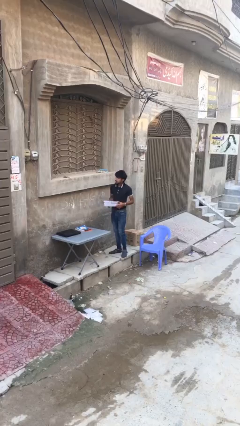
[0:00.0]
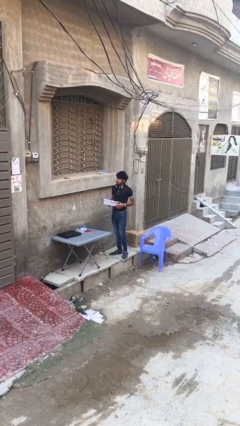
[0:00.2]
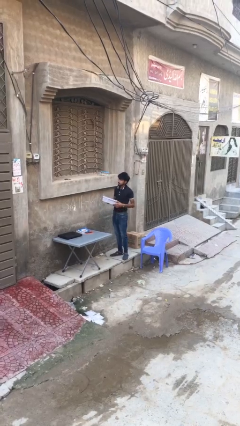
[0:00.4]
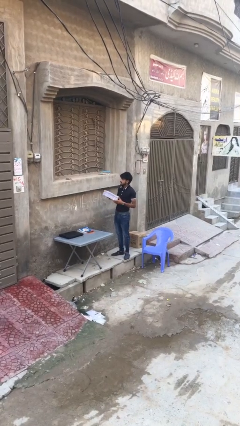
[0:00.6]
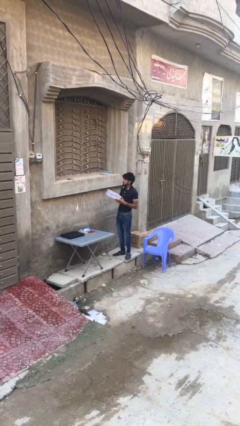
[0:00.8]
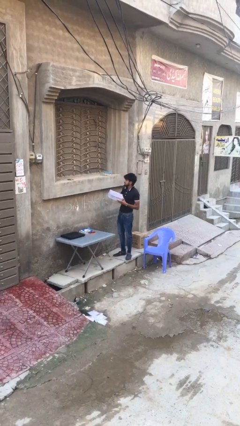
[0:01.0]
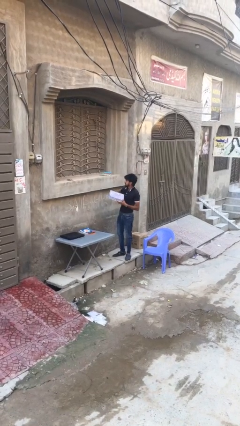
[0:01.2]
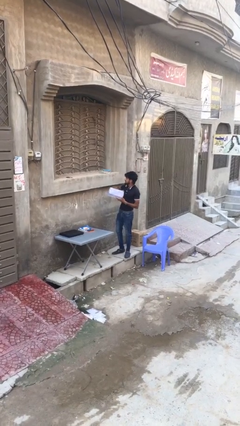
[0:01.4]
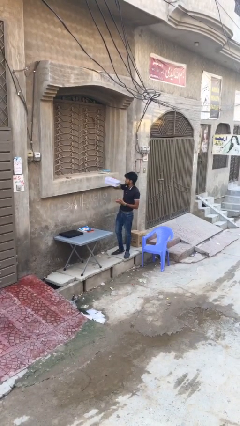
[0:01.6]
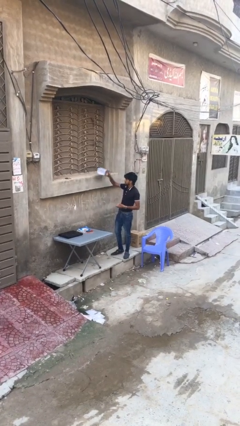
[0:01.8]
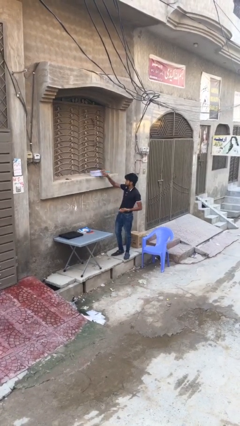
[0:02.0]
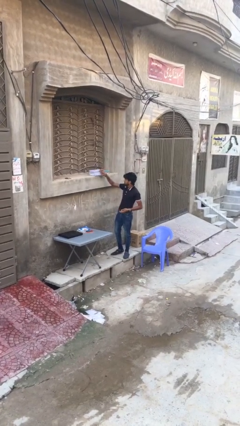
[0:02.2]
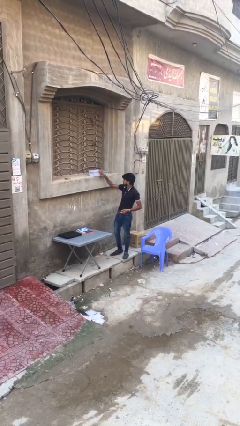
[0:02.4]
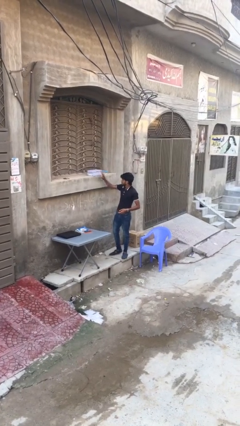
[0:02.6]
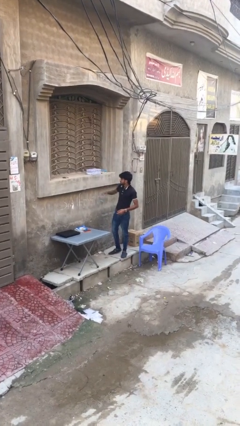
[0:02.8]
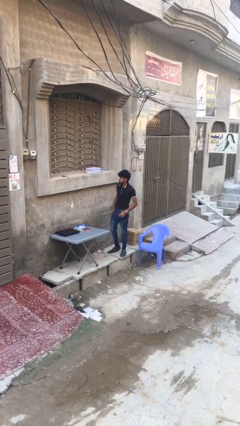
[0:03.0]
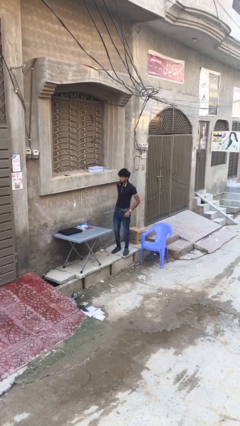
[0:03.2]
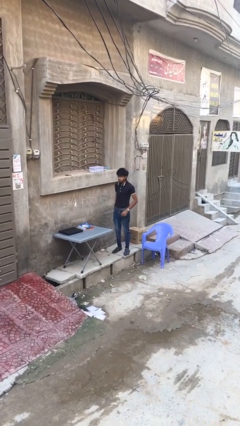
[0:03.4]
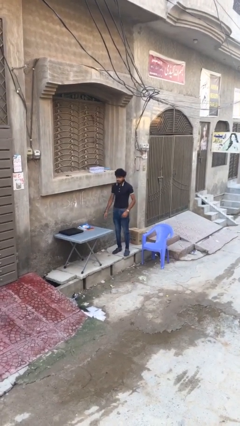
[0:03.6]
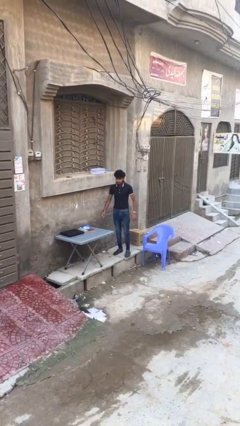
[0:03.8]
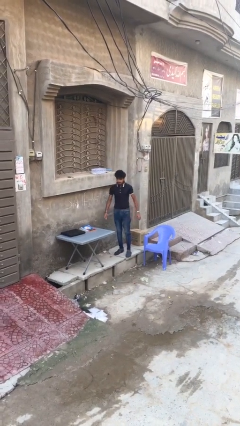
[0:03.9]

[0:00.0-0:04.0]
person puts down object on shelf

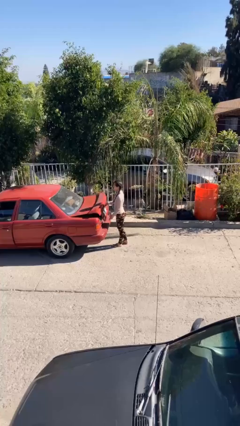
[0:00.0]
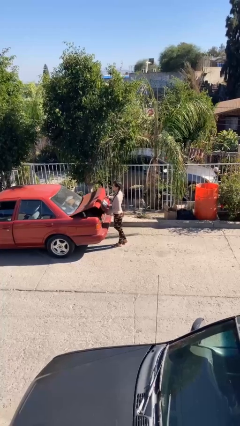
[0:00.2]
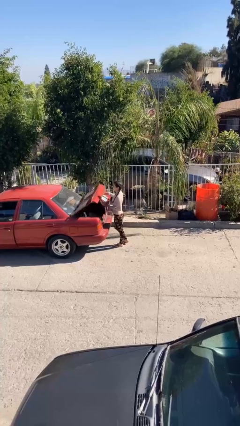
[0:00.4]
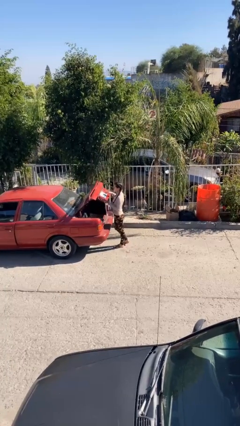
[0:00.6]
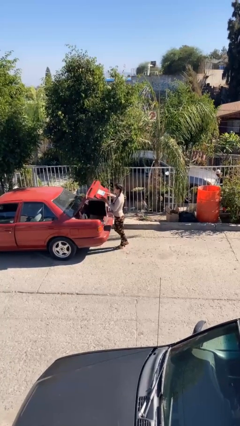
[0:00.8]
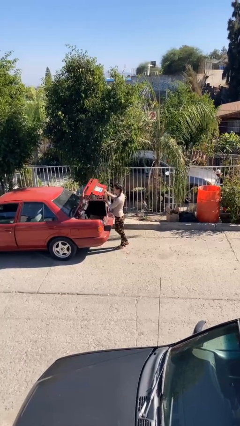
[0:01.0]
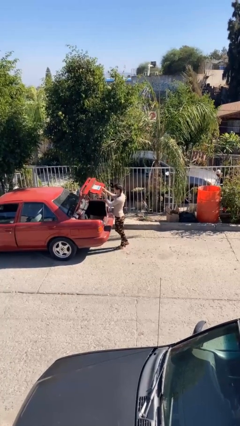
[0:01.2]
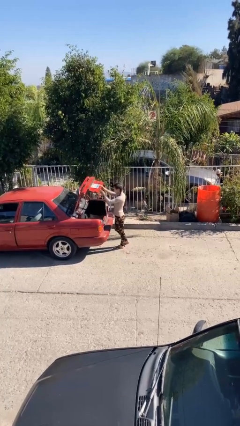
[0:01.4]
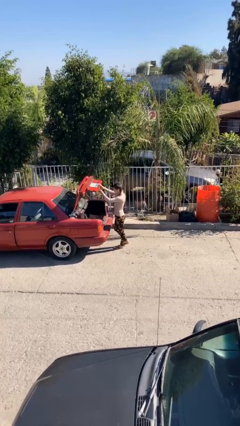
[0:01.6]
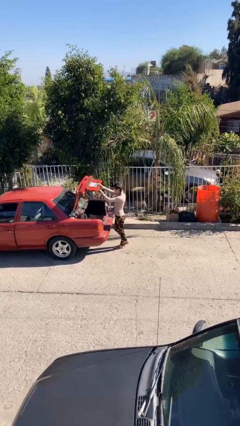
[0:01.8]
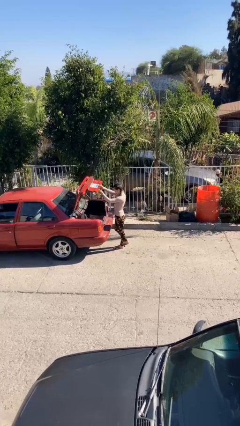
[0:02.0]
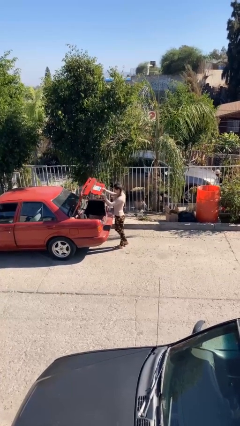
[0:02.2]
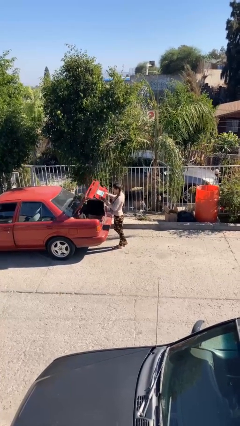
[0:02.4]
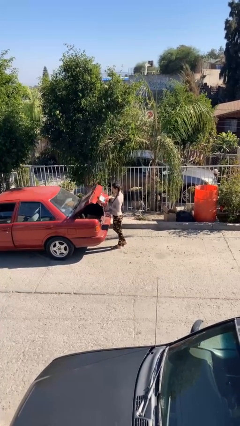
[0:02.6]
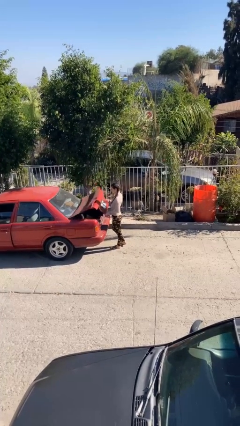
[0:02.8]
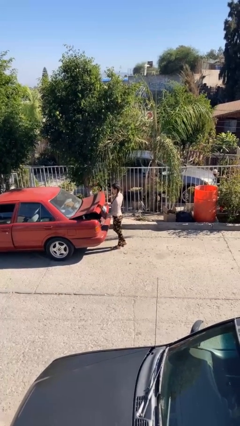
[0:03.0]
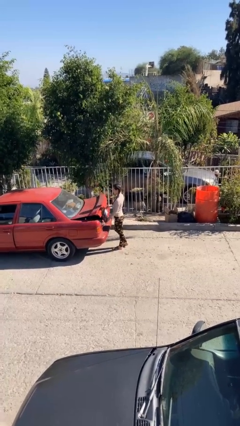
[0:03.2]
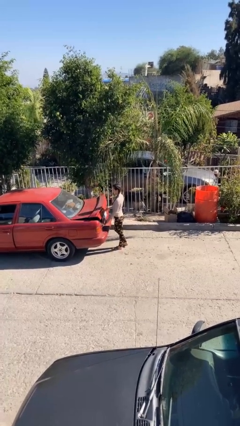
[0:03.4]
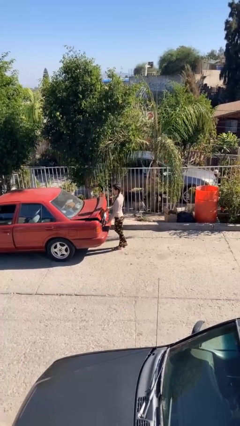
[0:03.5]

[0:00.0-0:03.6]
person opens car trunk

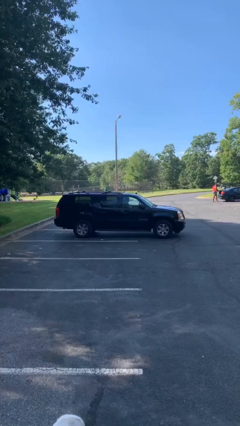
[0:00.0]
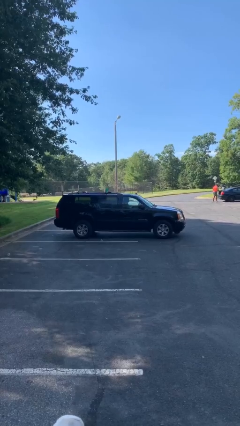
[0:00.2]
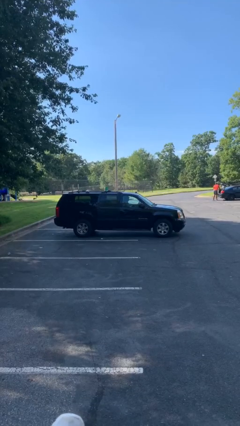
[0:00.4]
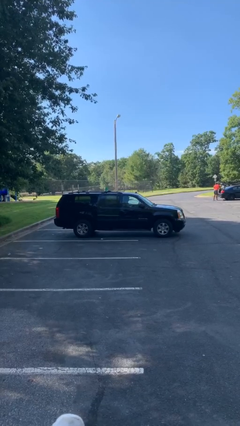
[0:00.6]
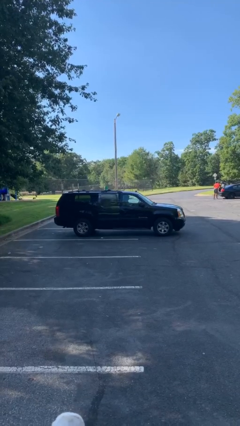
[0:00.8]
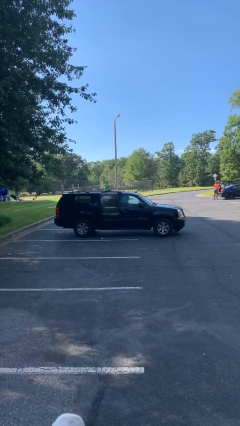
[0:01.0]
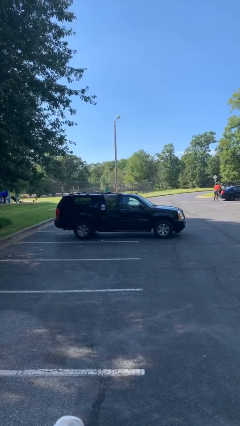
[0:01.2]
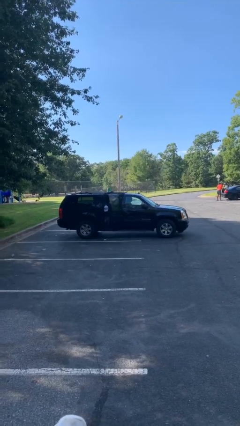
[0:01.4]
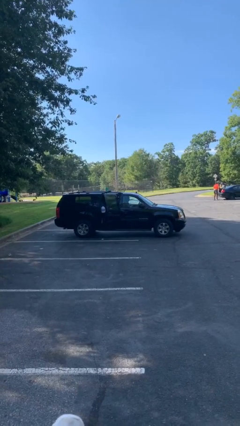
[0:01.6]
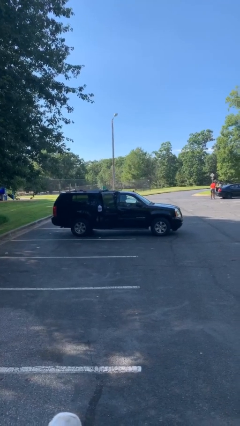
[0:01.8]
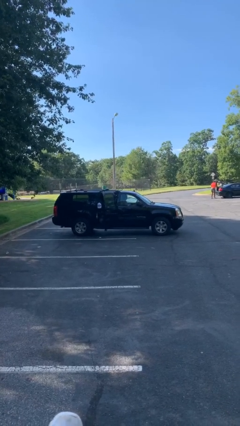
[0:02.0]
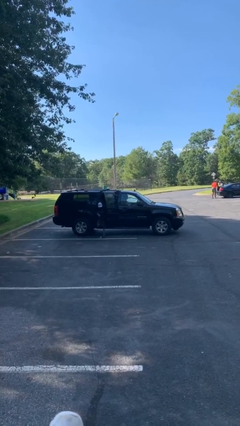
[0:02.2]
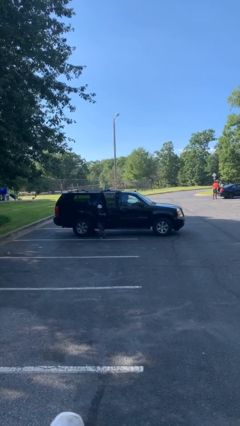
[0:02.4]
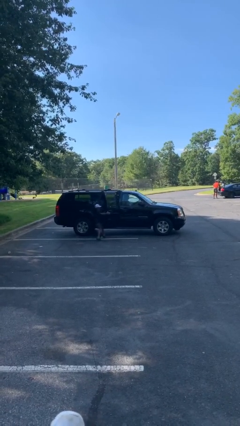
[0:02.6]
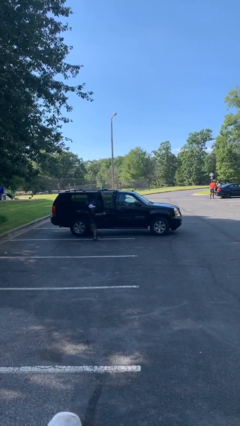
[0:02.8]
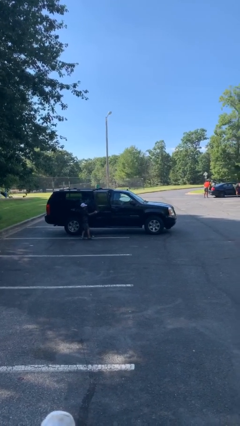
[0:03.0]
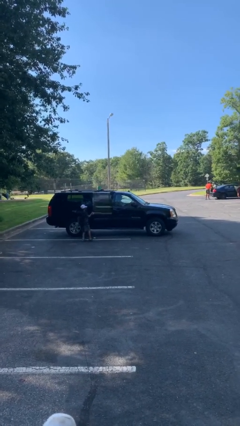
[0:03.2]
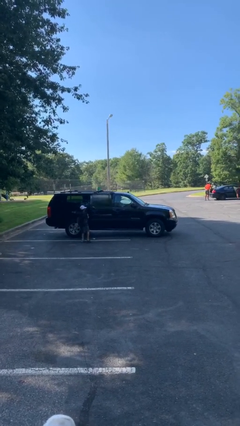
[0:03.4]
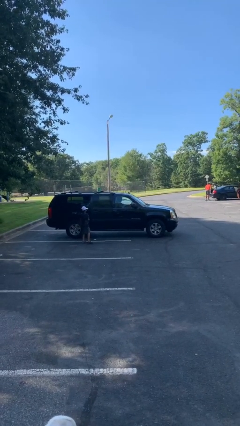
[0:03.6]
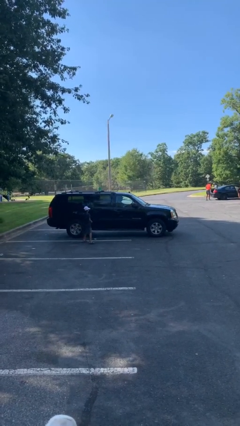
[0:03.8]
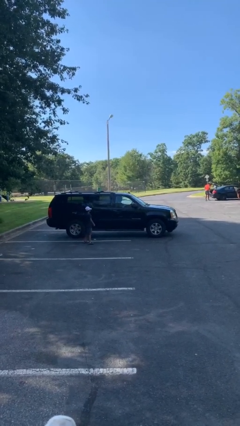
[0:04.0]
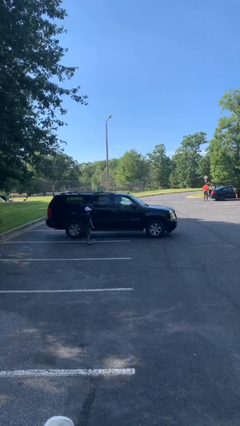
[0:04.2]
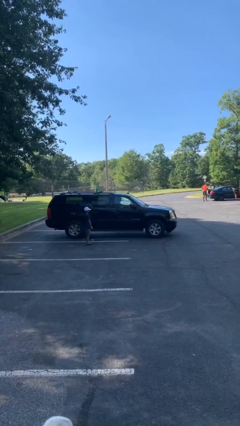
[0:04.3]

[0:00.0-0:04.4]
car drops off person

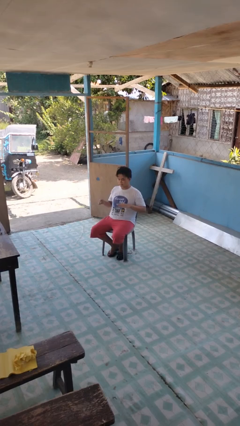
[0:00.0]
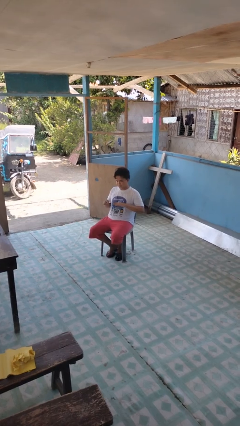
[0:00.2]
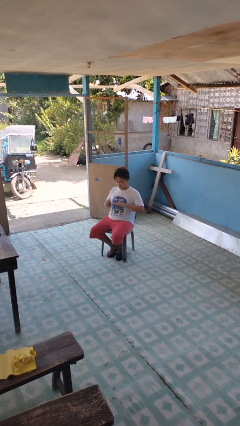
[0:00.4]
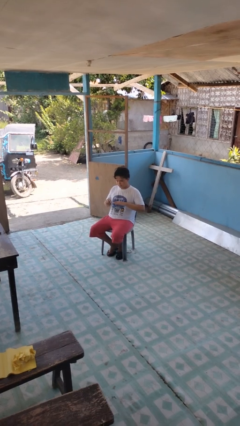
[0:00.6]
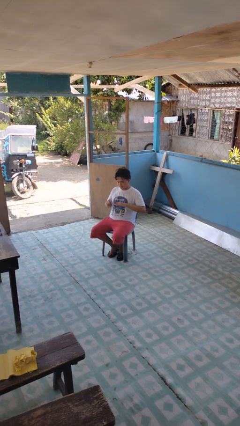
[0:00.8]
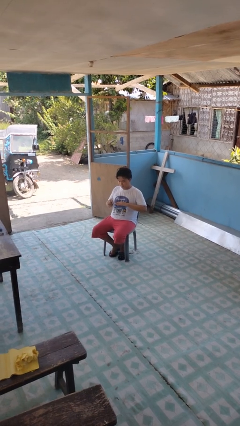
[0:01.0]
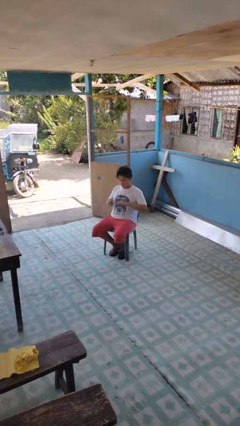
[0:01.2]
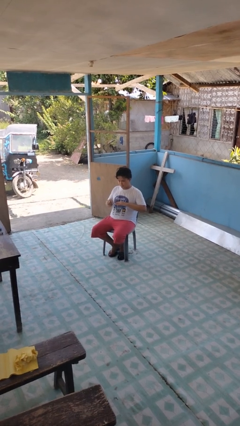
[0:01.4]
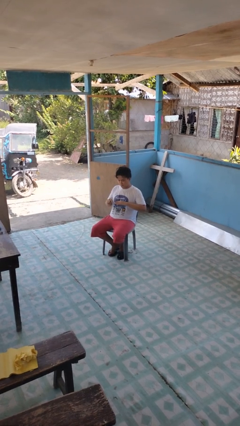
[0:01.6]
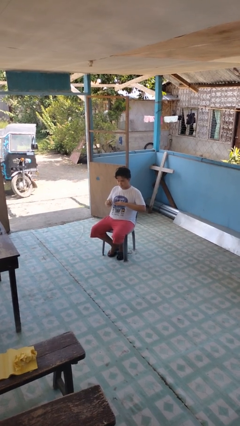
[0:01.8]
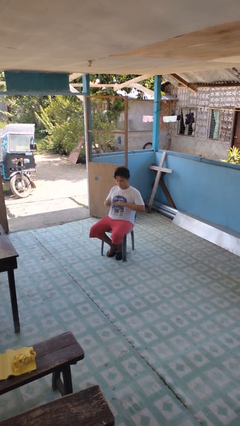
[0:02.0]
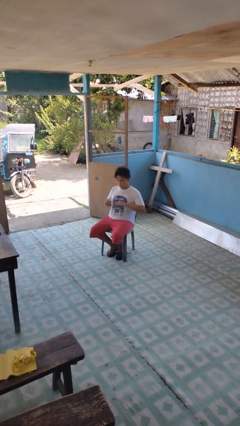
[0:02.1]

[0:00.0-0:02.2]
person files fingernails

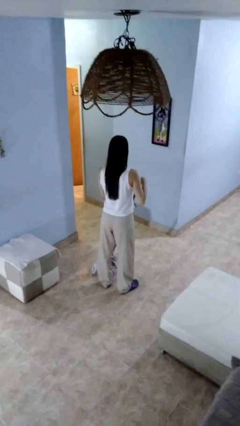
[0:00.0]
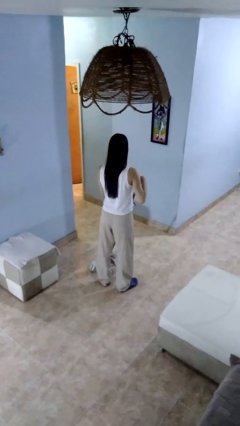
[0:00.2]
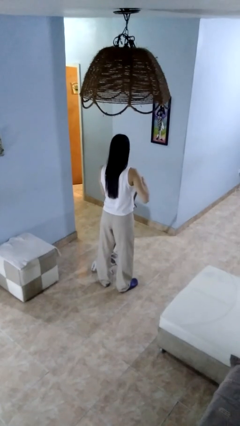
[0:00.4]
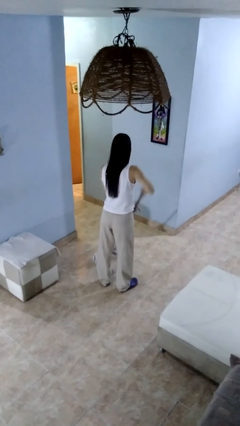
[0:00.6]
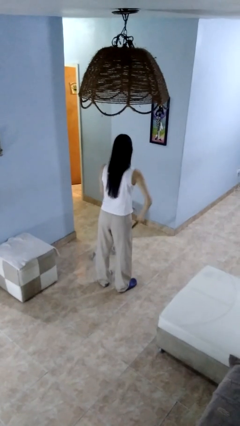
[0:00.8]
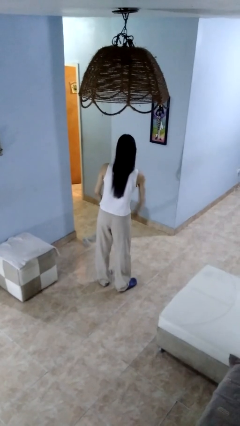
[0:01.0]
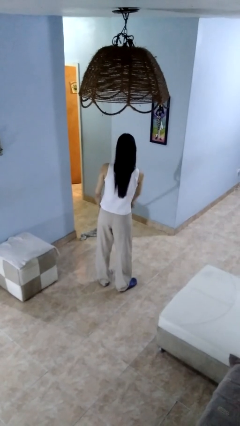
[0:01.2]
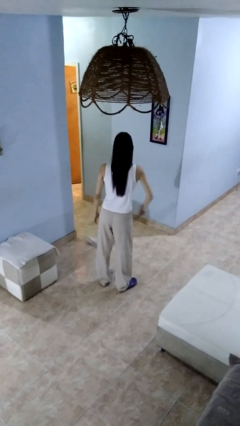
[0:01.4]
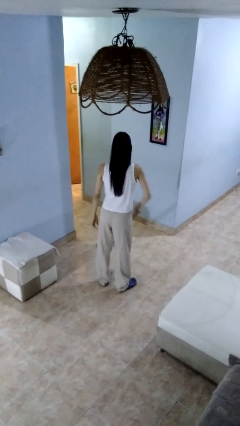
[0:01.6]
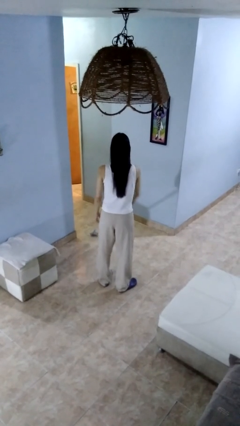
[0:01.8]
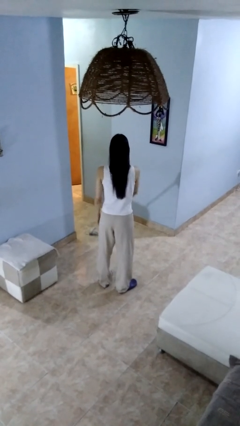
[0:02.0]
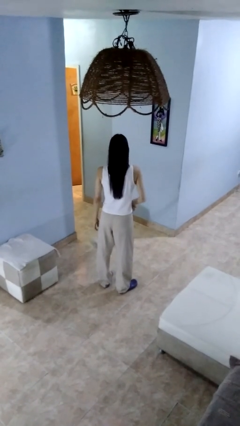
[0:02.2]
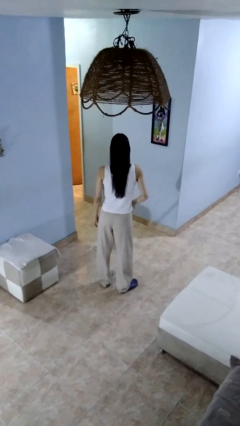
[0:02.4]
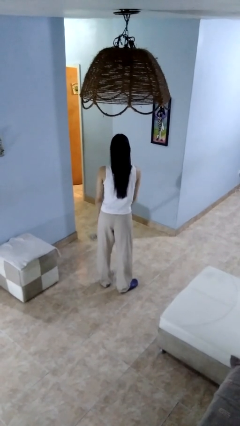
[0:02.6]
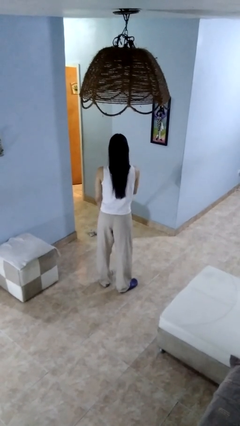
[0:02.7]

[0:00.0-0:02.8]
person mops

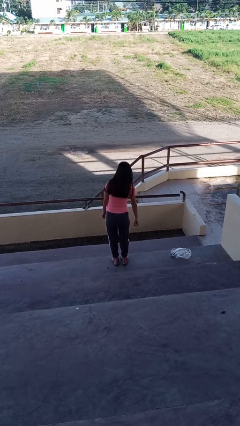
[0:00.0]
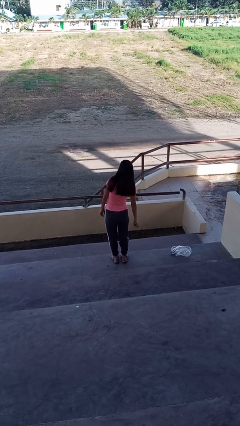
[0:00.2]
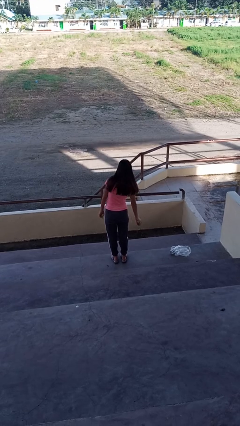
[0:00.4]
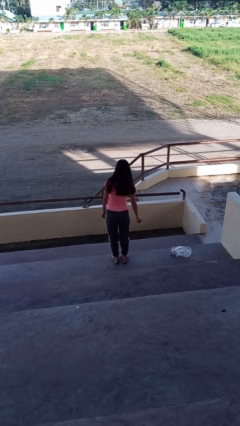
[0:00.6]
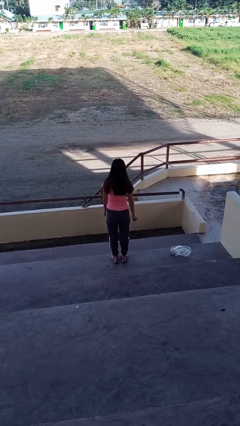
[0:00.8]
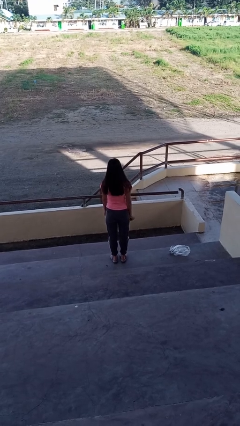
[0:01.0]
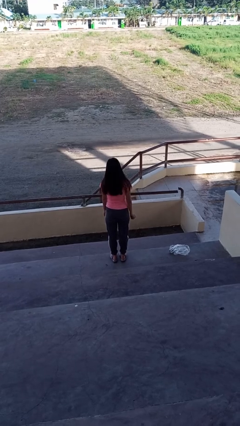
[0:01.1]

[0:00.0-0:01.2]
person catches dropped object
